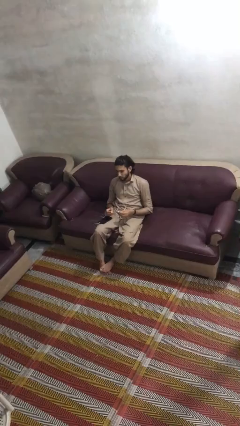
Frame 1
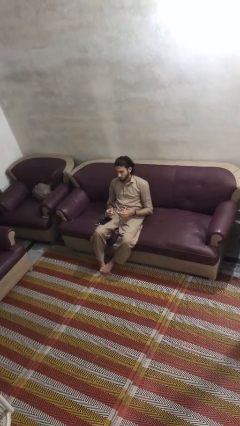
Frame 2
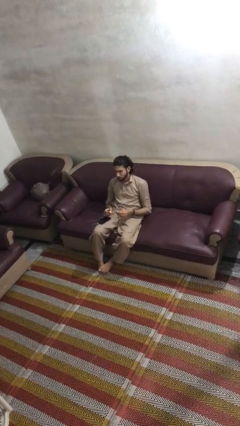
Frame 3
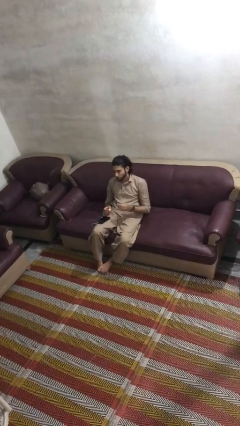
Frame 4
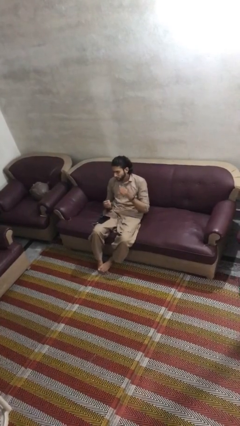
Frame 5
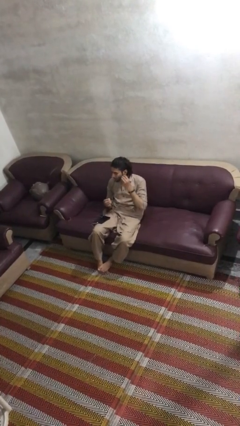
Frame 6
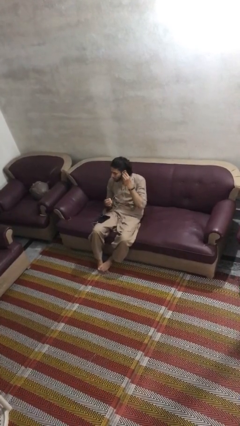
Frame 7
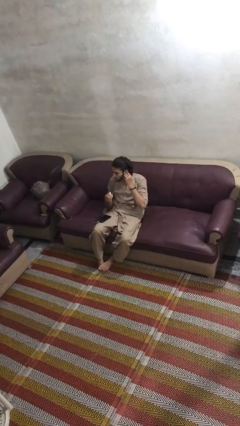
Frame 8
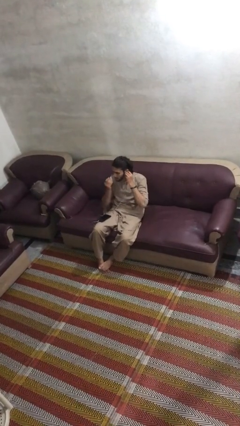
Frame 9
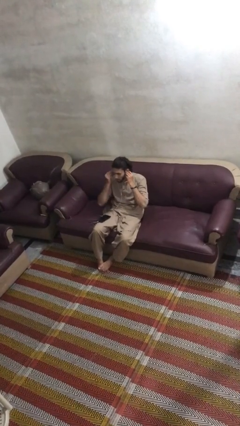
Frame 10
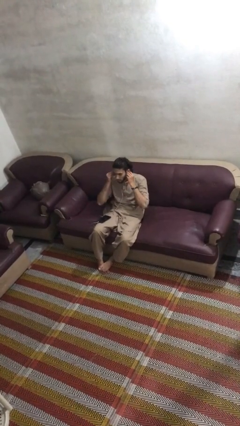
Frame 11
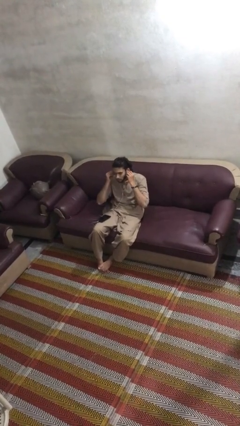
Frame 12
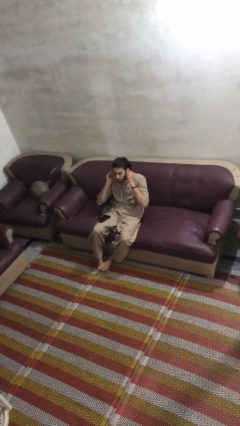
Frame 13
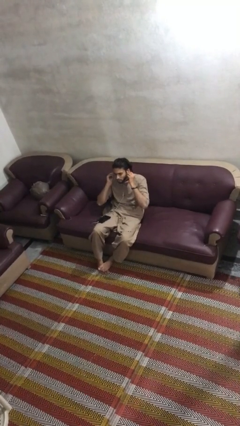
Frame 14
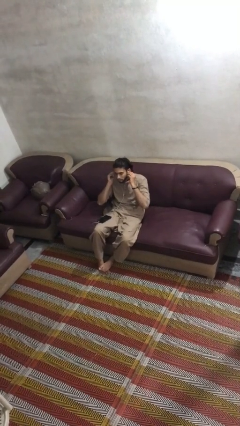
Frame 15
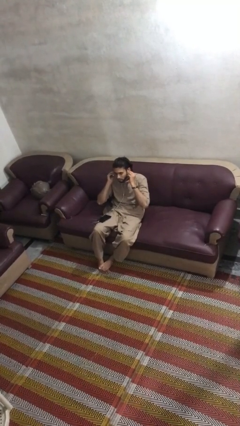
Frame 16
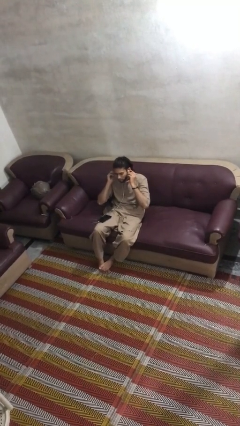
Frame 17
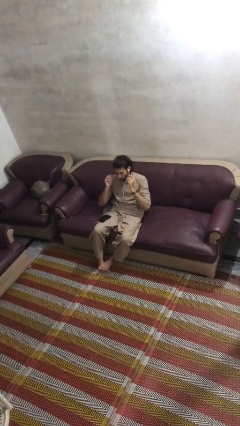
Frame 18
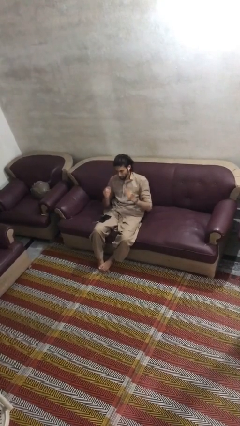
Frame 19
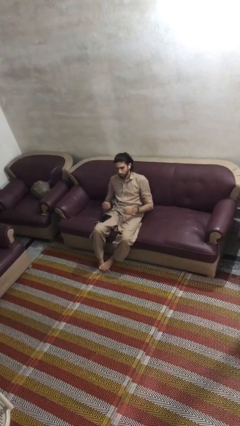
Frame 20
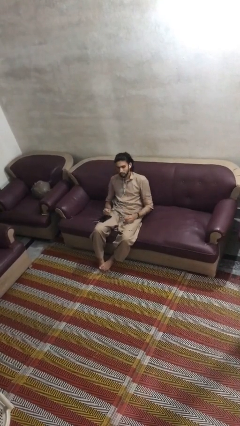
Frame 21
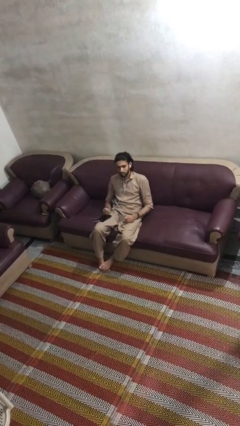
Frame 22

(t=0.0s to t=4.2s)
person puts on headphones

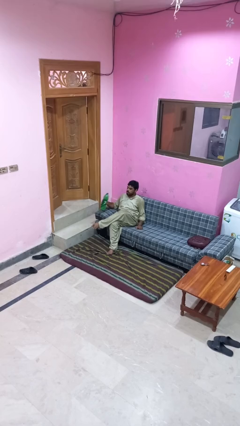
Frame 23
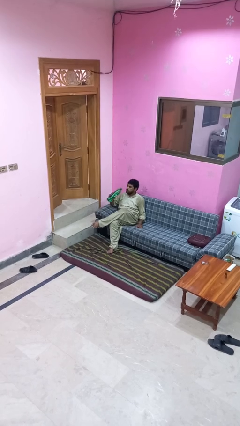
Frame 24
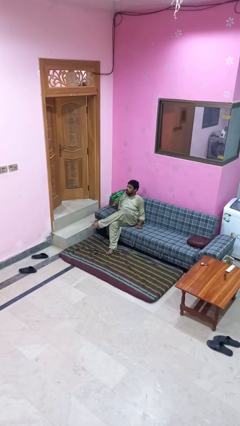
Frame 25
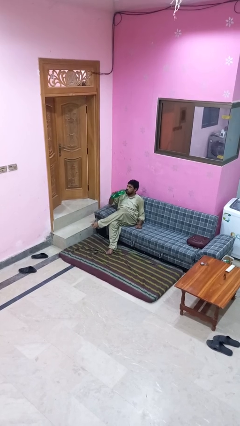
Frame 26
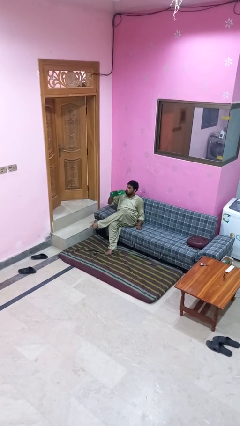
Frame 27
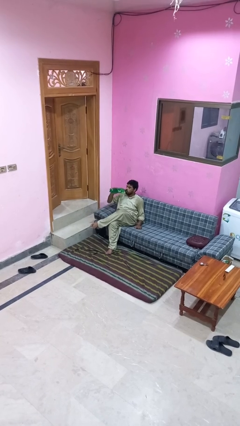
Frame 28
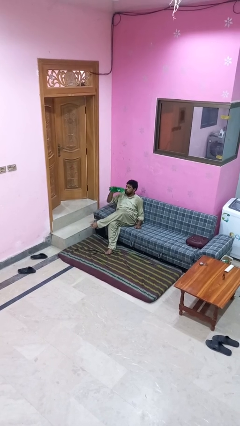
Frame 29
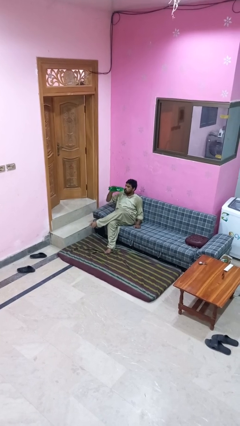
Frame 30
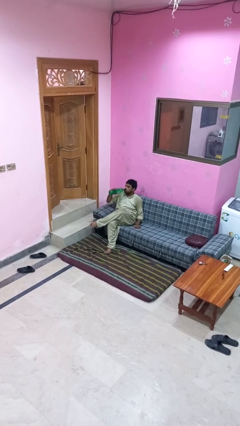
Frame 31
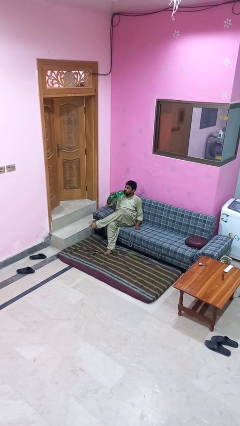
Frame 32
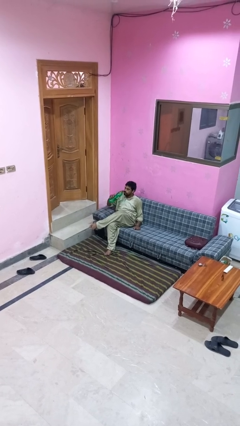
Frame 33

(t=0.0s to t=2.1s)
person drinks from bottle

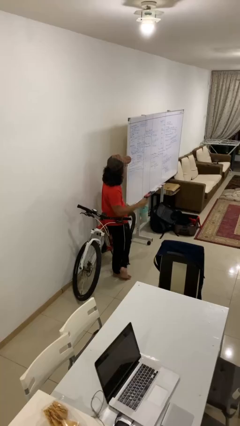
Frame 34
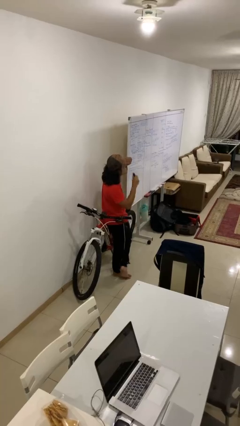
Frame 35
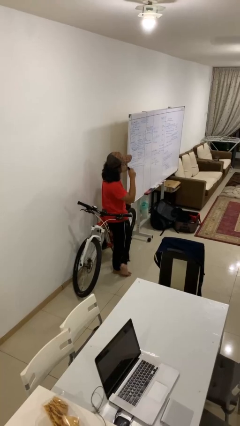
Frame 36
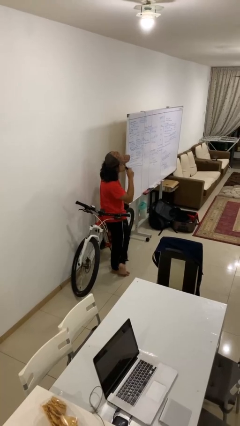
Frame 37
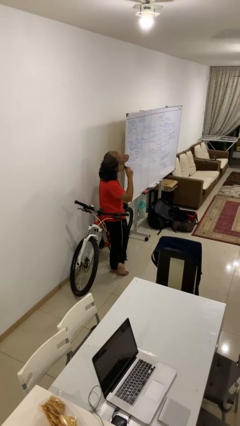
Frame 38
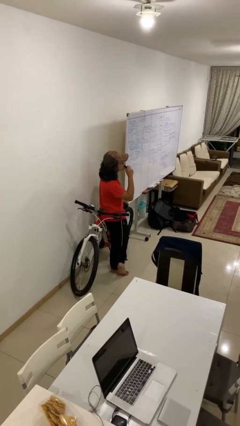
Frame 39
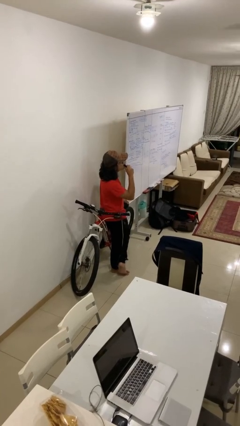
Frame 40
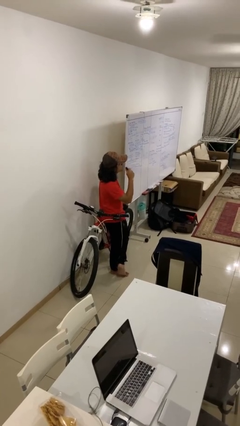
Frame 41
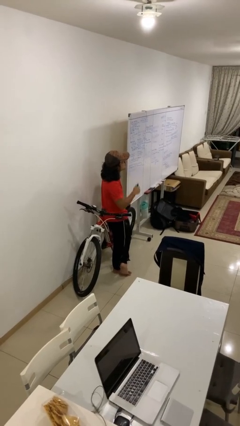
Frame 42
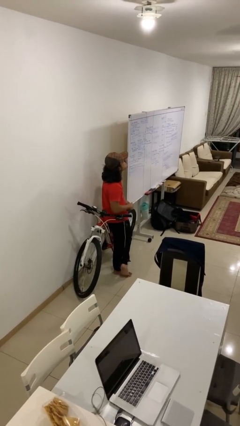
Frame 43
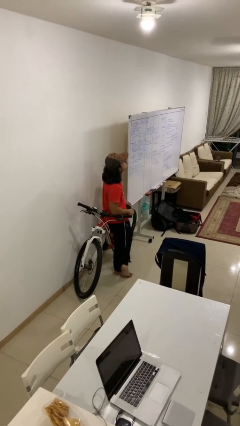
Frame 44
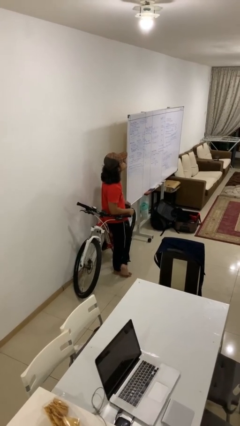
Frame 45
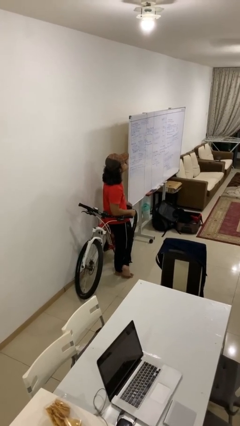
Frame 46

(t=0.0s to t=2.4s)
person vapes

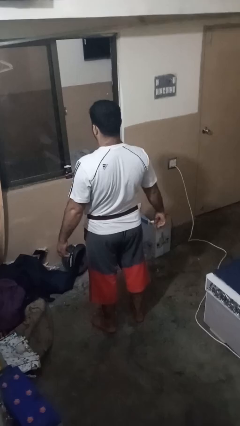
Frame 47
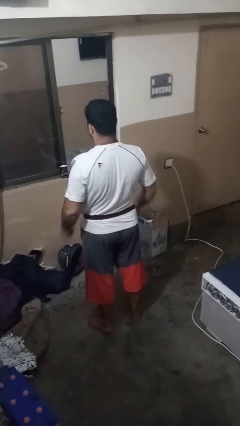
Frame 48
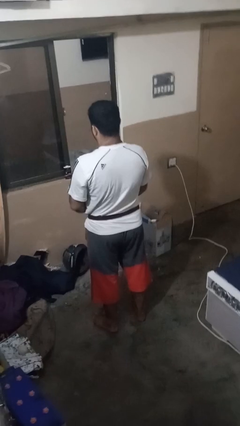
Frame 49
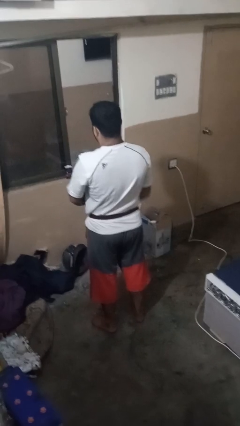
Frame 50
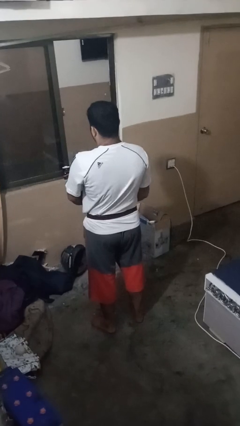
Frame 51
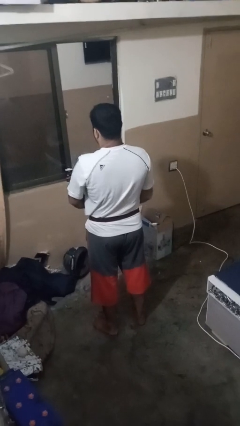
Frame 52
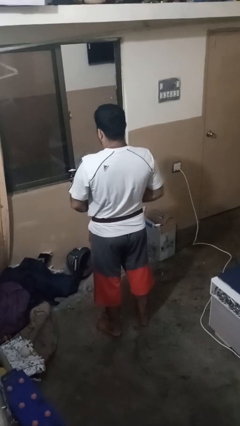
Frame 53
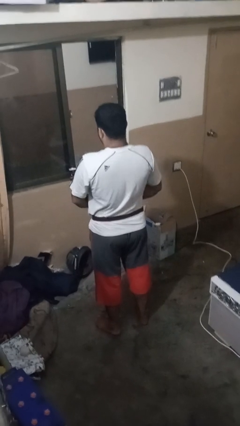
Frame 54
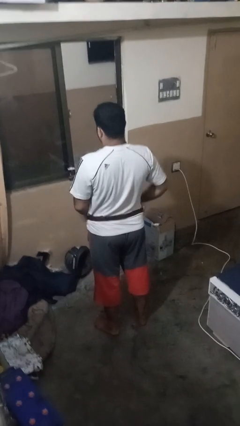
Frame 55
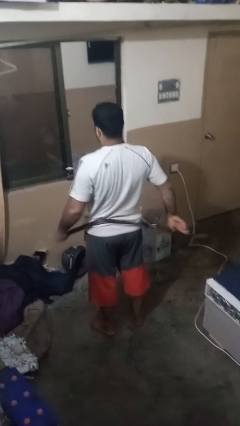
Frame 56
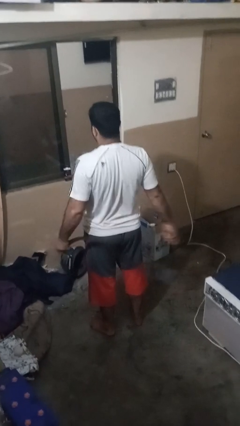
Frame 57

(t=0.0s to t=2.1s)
person takes off belt

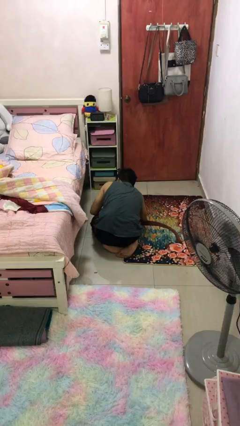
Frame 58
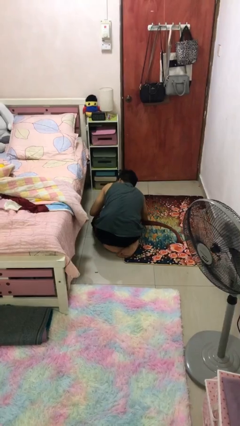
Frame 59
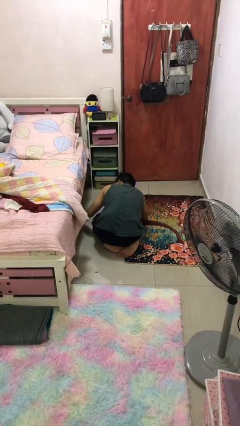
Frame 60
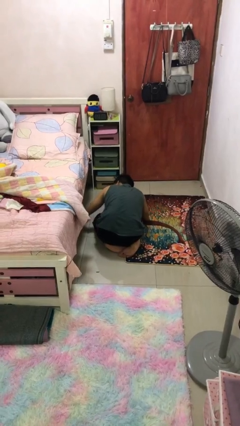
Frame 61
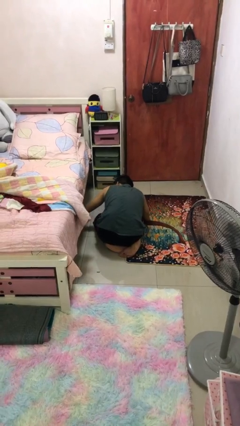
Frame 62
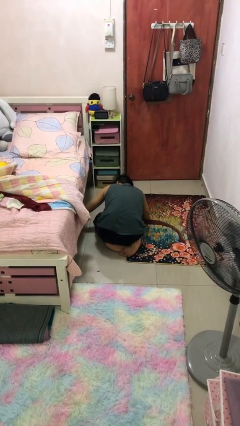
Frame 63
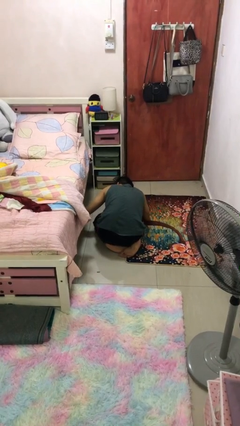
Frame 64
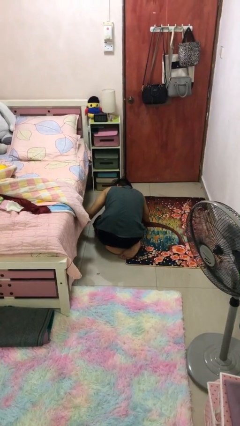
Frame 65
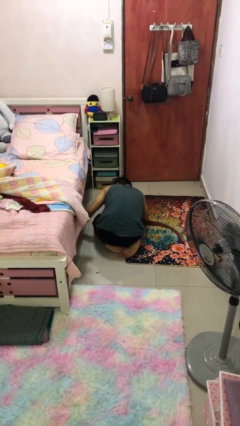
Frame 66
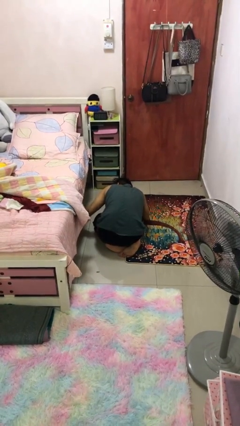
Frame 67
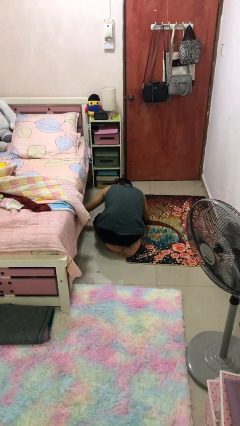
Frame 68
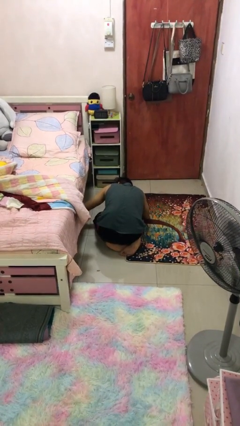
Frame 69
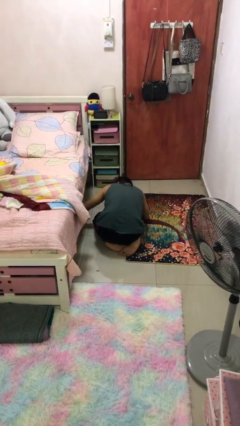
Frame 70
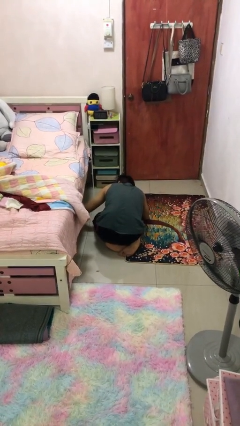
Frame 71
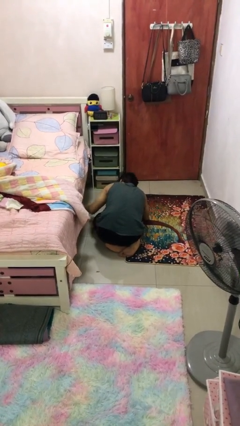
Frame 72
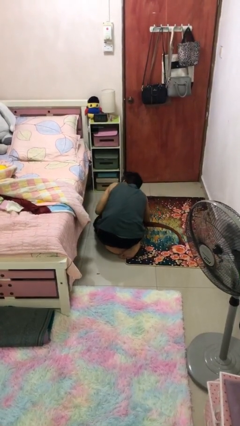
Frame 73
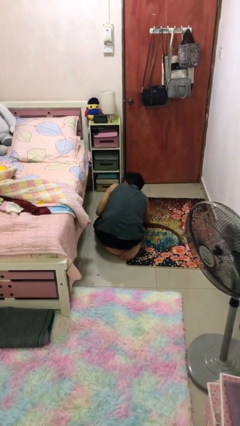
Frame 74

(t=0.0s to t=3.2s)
person searches under bed

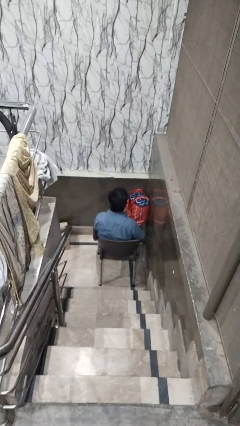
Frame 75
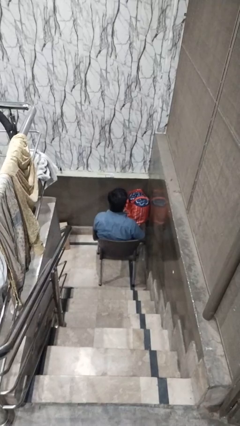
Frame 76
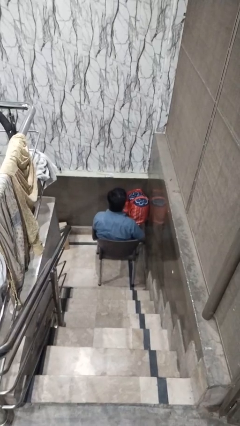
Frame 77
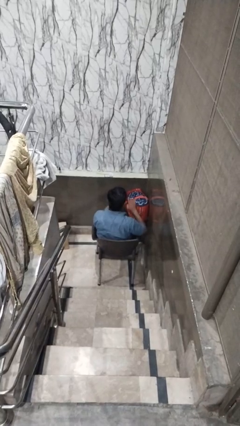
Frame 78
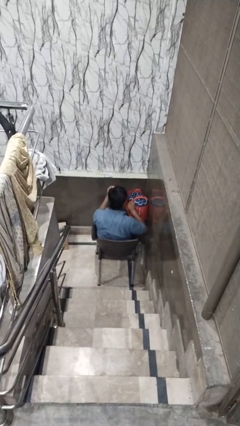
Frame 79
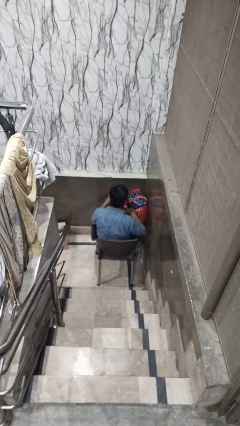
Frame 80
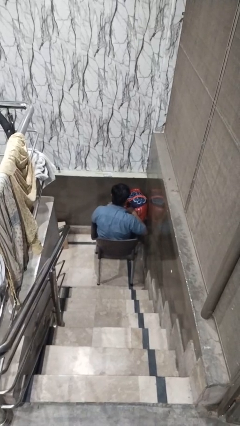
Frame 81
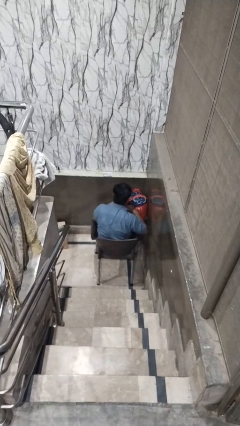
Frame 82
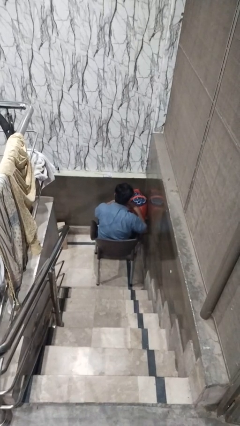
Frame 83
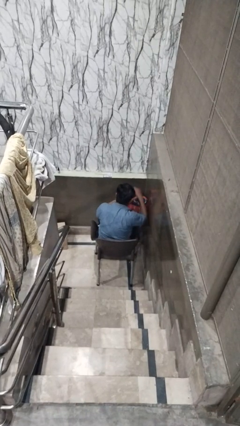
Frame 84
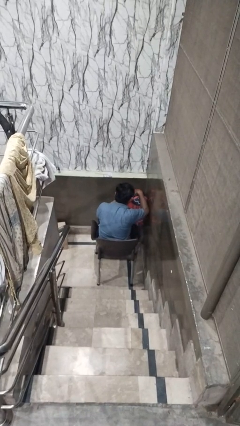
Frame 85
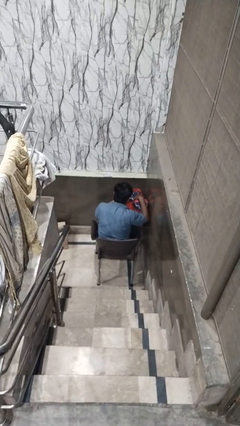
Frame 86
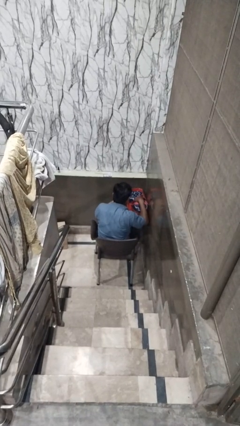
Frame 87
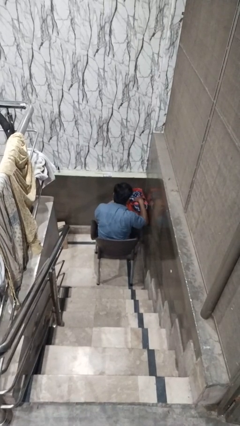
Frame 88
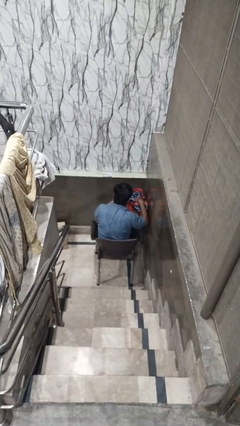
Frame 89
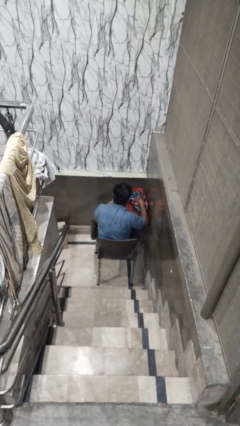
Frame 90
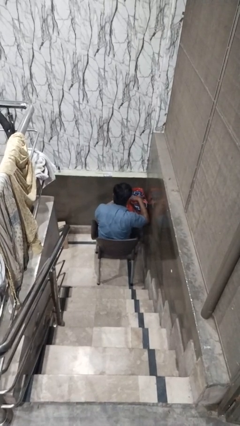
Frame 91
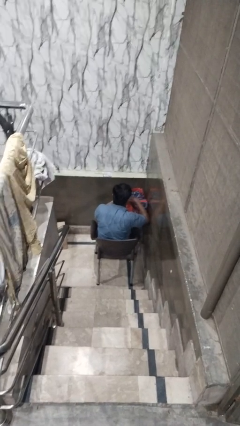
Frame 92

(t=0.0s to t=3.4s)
person searches in bag

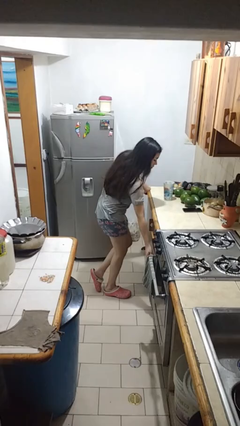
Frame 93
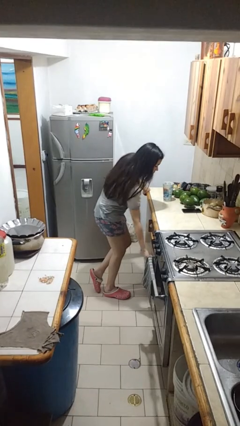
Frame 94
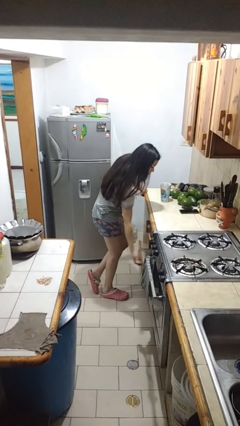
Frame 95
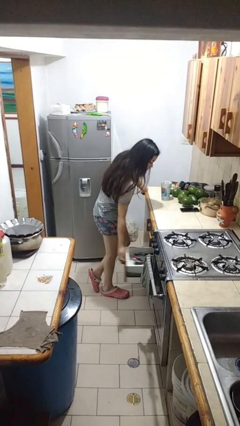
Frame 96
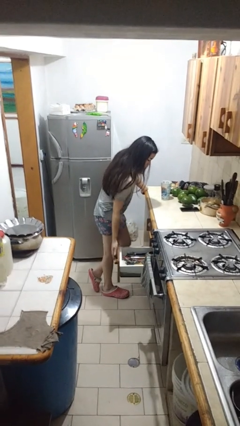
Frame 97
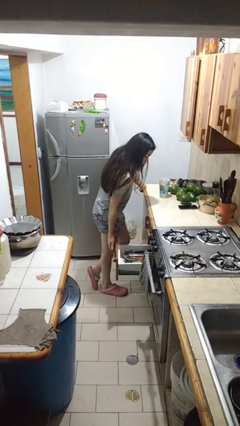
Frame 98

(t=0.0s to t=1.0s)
person opens kitchen drawer
